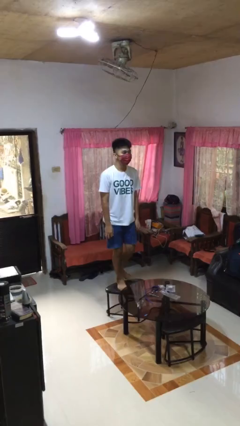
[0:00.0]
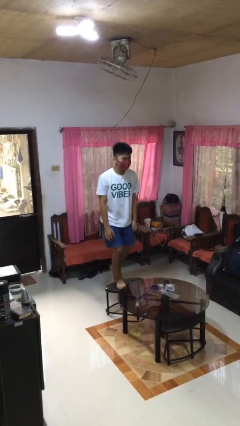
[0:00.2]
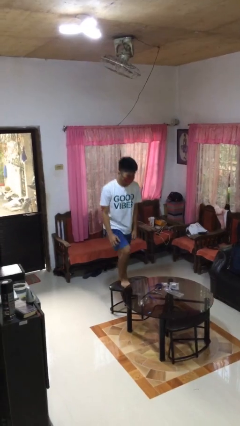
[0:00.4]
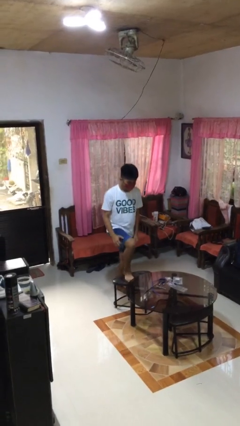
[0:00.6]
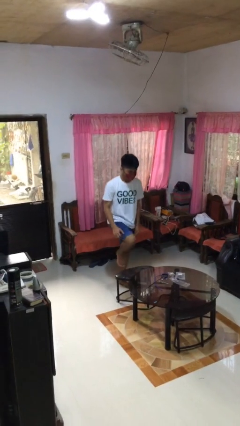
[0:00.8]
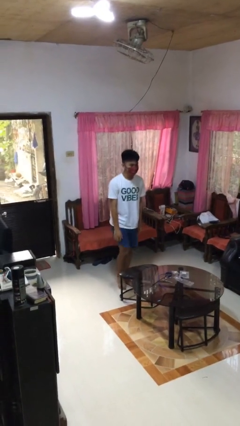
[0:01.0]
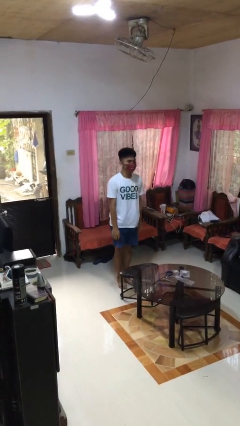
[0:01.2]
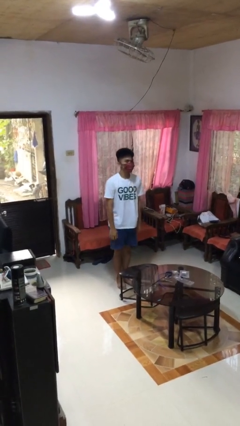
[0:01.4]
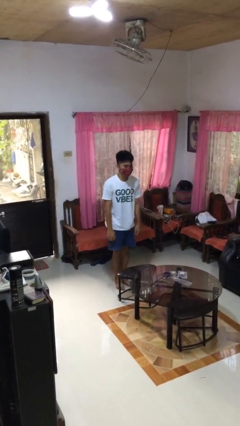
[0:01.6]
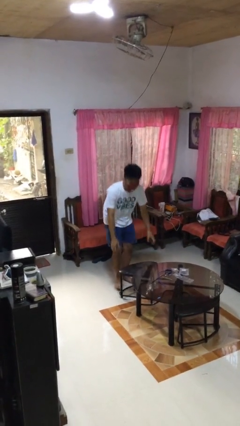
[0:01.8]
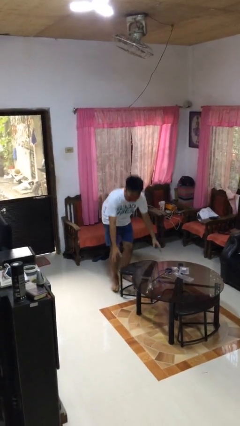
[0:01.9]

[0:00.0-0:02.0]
person climbs off chair

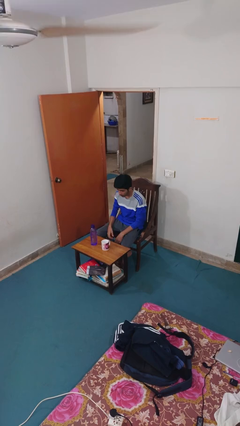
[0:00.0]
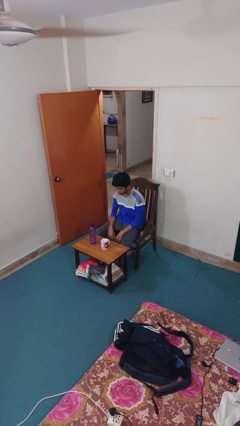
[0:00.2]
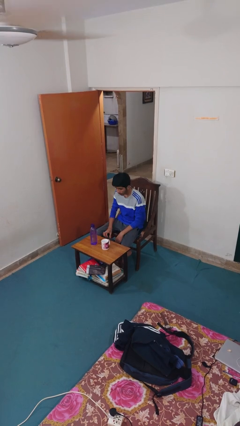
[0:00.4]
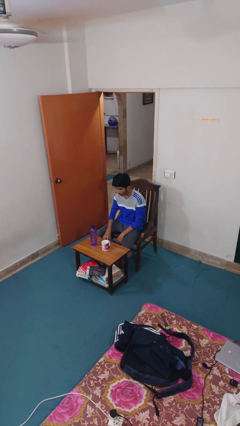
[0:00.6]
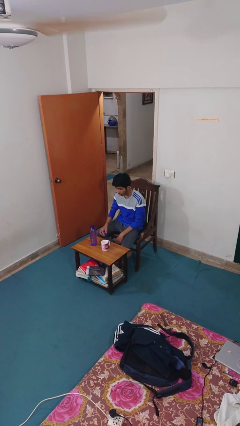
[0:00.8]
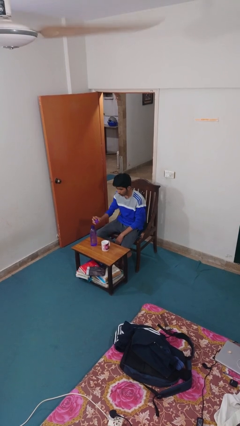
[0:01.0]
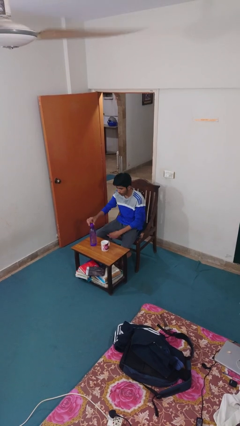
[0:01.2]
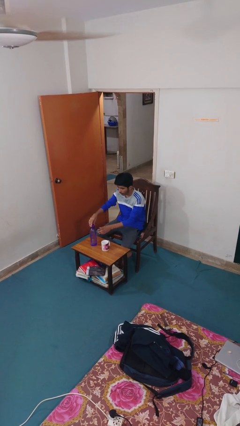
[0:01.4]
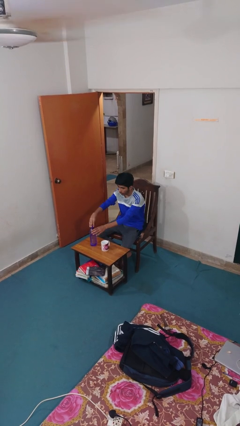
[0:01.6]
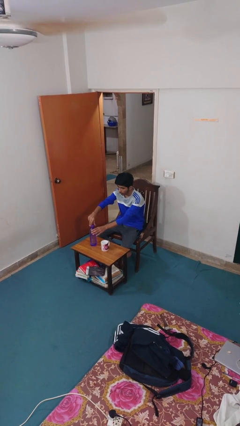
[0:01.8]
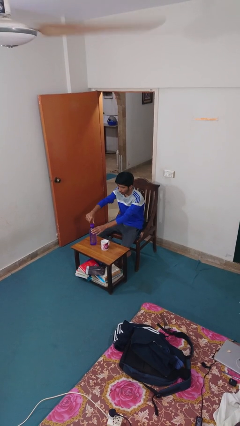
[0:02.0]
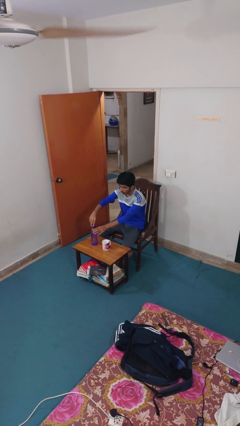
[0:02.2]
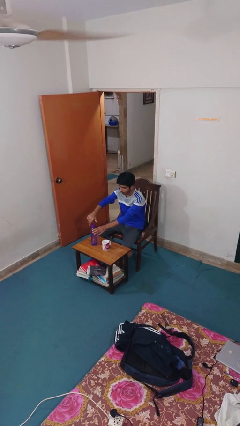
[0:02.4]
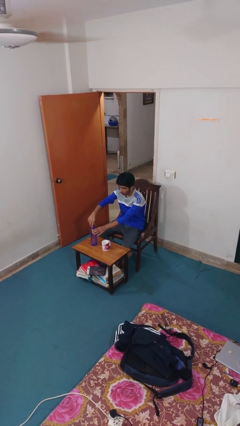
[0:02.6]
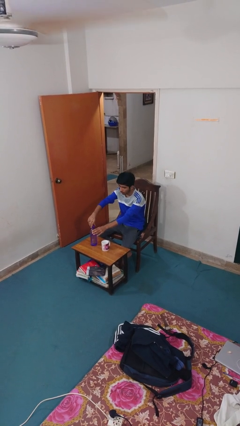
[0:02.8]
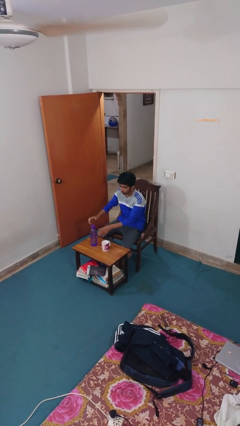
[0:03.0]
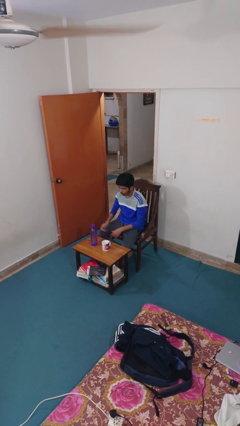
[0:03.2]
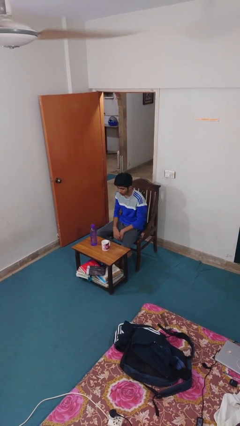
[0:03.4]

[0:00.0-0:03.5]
person screws lid to bottle

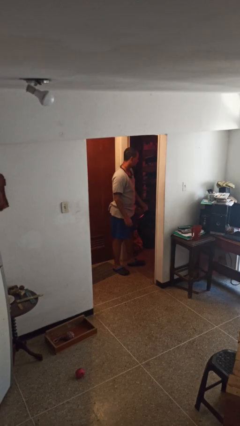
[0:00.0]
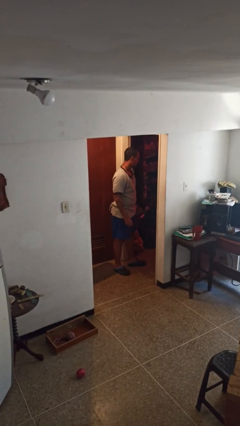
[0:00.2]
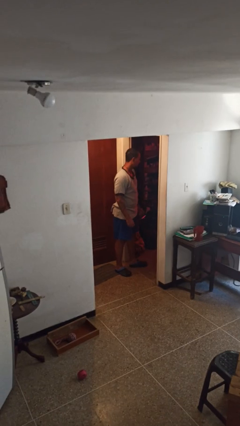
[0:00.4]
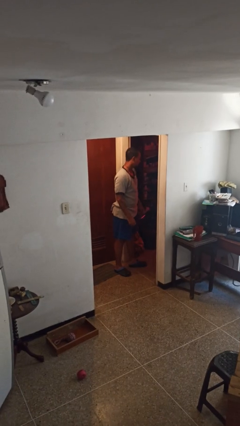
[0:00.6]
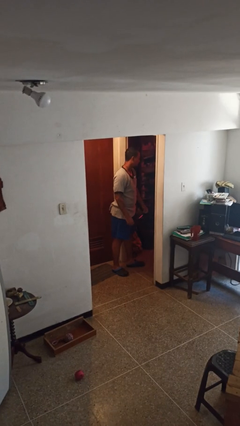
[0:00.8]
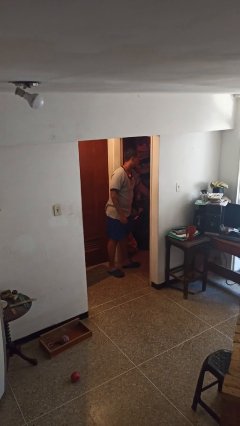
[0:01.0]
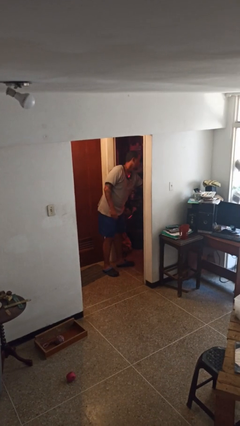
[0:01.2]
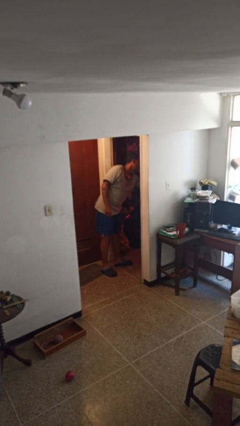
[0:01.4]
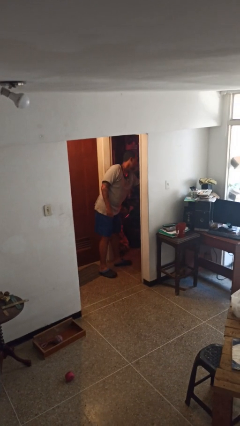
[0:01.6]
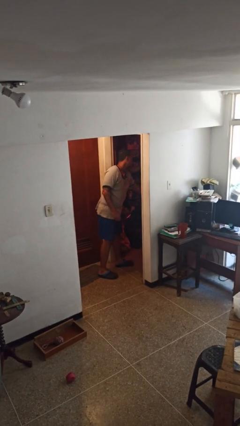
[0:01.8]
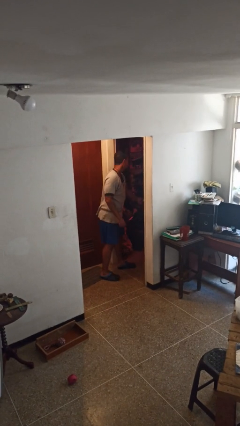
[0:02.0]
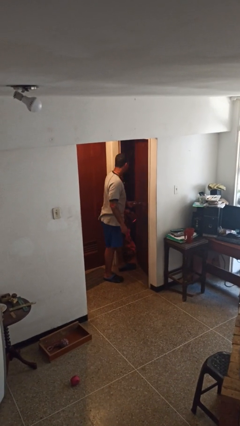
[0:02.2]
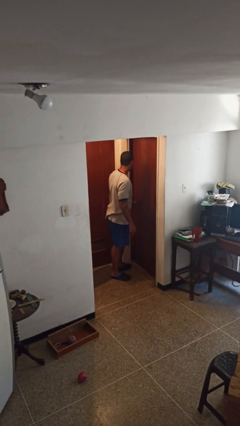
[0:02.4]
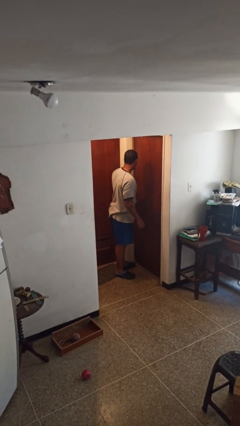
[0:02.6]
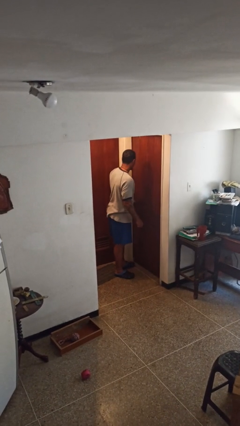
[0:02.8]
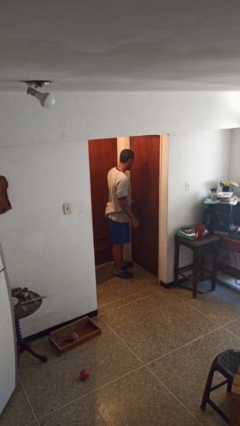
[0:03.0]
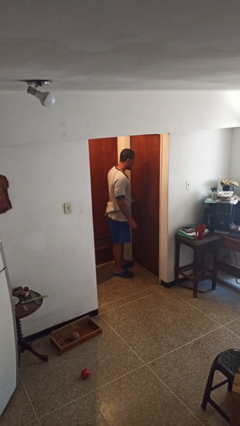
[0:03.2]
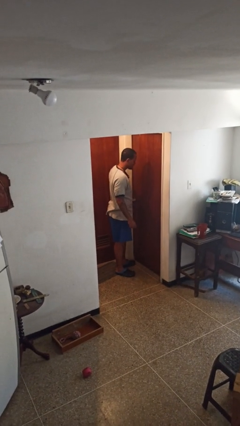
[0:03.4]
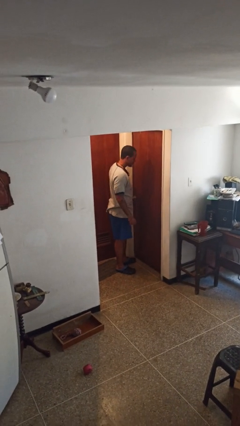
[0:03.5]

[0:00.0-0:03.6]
person closes facility door

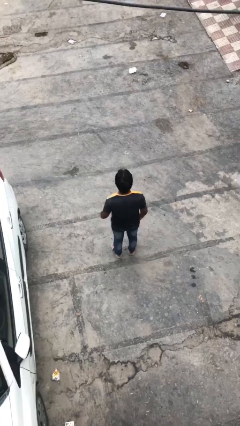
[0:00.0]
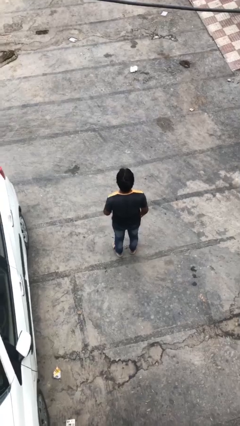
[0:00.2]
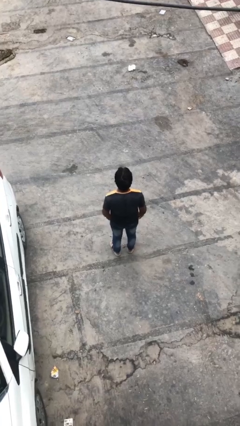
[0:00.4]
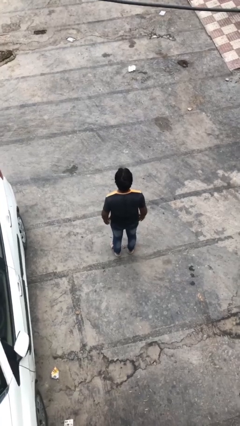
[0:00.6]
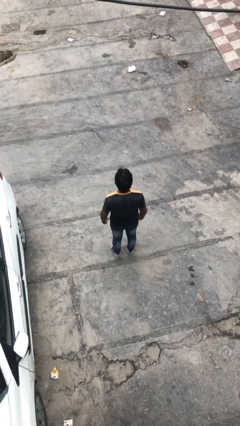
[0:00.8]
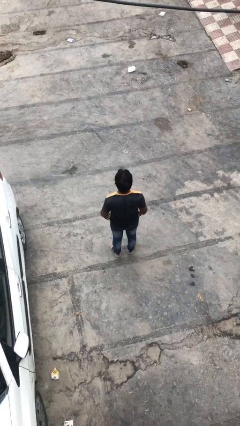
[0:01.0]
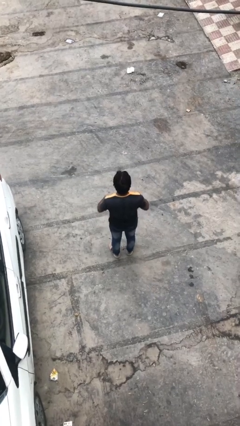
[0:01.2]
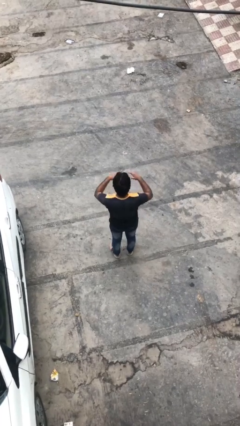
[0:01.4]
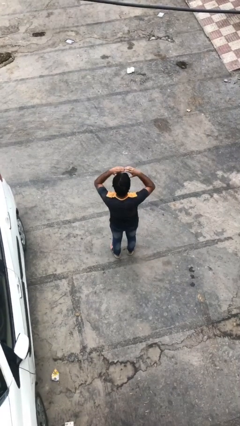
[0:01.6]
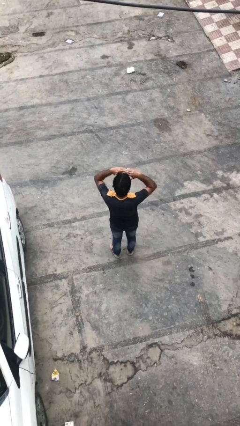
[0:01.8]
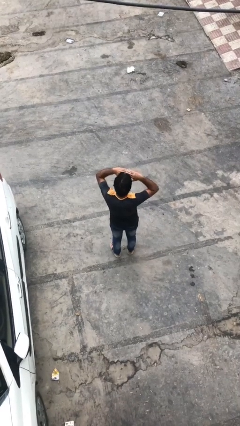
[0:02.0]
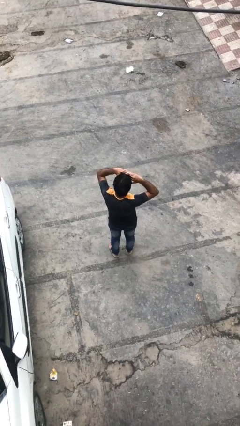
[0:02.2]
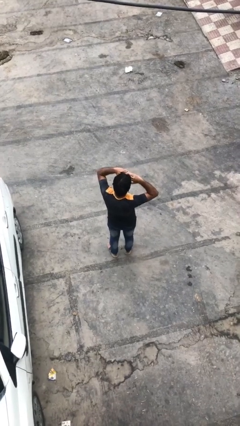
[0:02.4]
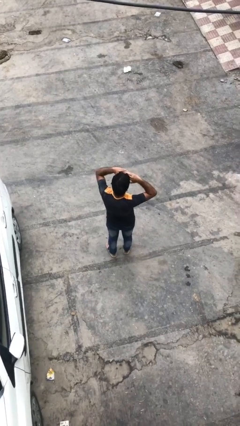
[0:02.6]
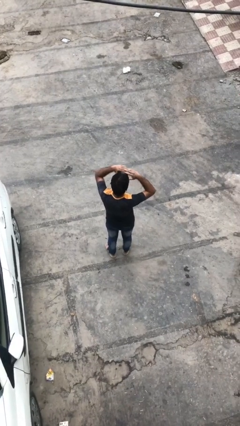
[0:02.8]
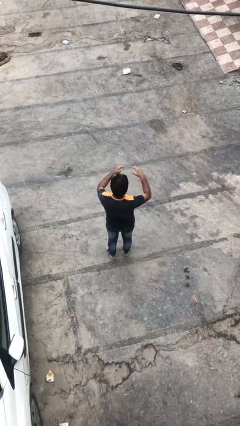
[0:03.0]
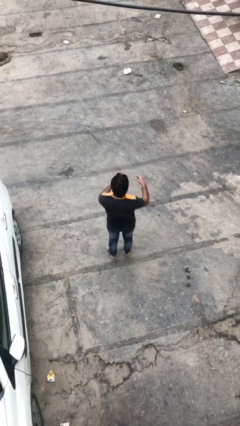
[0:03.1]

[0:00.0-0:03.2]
person shades eyes

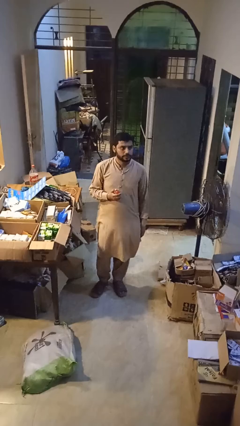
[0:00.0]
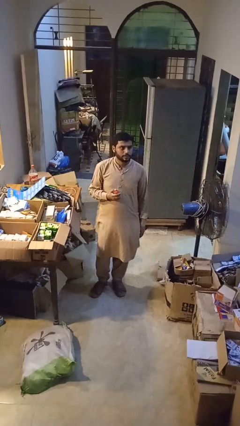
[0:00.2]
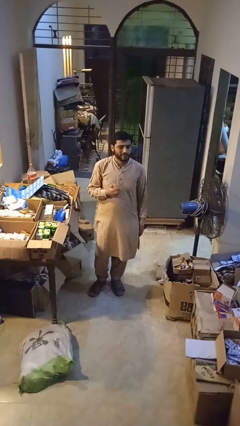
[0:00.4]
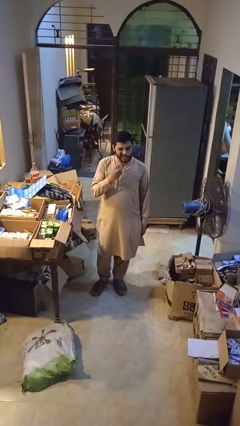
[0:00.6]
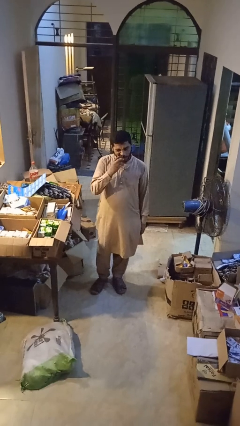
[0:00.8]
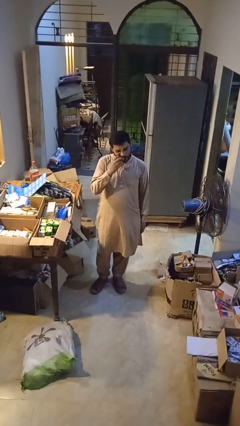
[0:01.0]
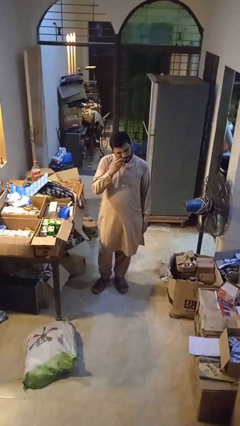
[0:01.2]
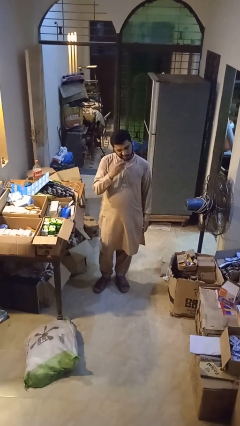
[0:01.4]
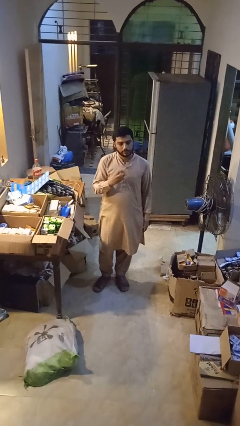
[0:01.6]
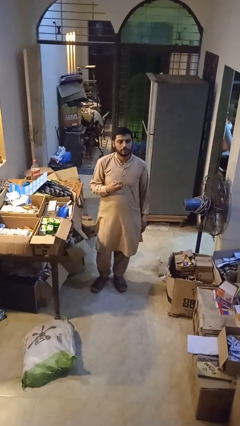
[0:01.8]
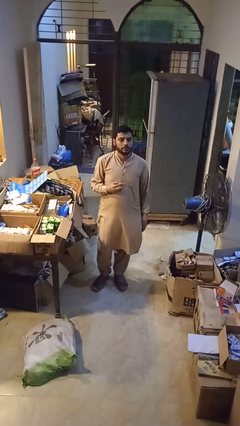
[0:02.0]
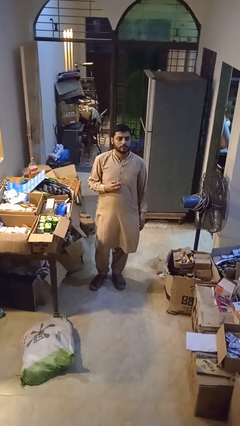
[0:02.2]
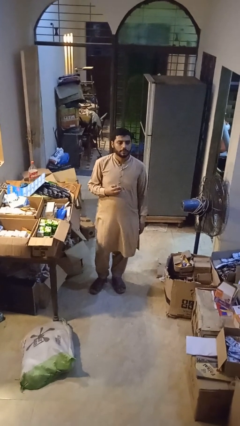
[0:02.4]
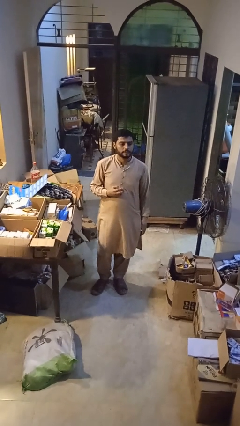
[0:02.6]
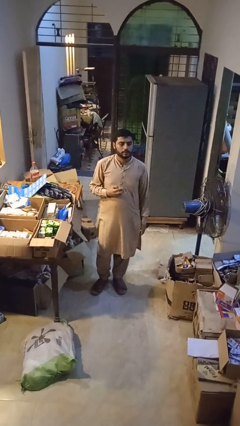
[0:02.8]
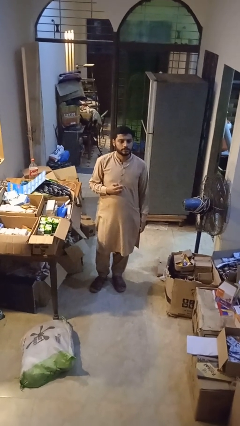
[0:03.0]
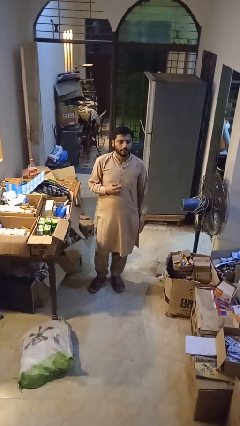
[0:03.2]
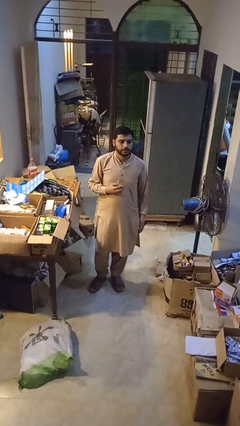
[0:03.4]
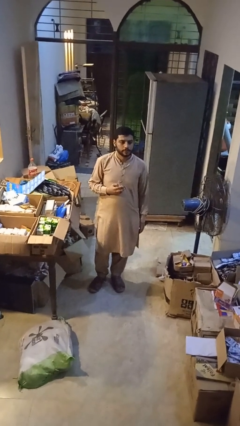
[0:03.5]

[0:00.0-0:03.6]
person eats apple

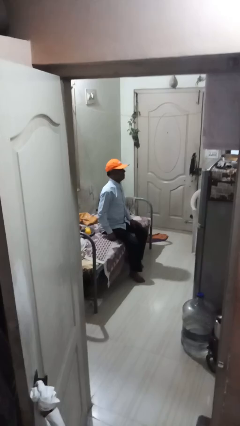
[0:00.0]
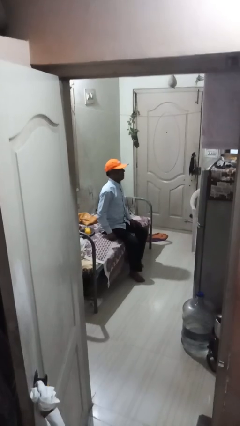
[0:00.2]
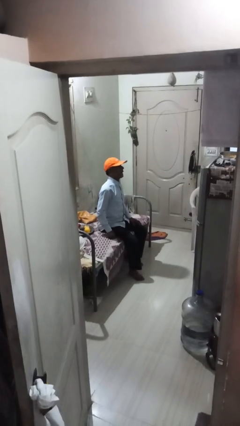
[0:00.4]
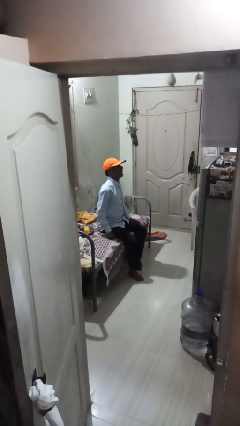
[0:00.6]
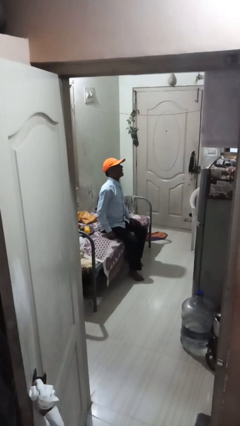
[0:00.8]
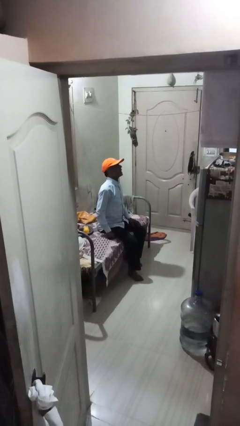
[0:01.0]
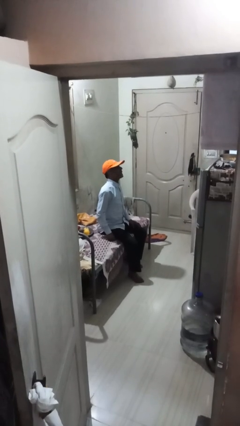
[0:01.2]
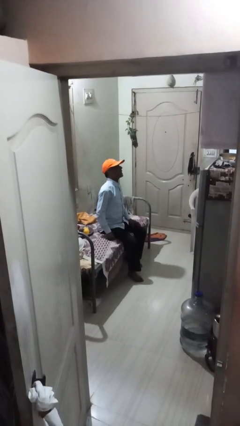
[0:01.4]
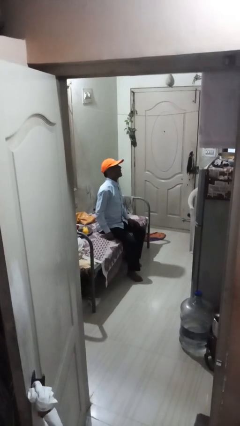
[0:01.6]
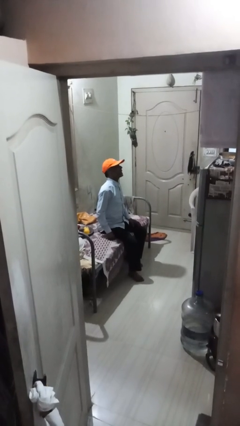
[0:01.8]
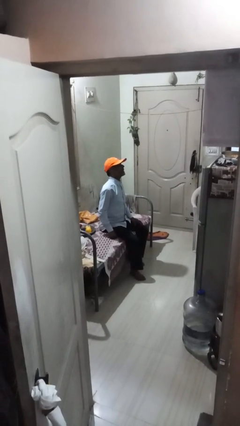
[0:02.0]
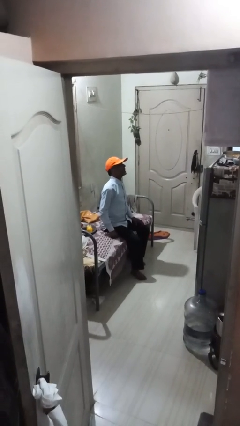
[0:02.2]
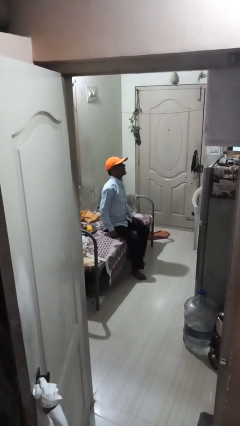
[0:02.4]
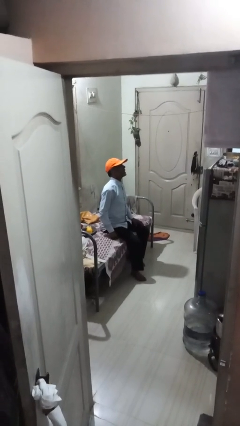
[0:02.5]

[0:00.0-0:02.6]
person sticks out tongue
